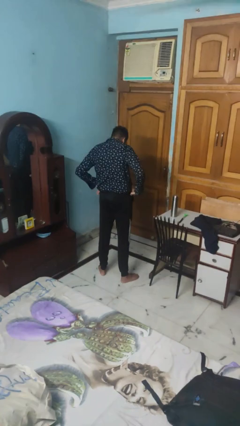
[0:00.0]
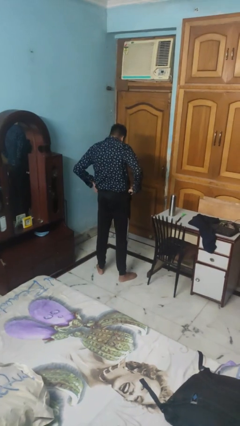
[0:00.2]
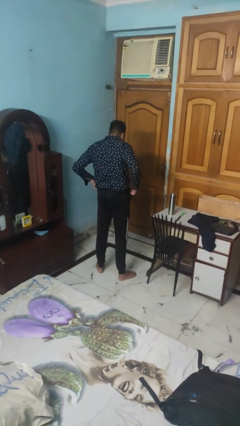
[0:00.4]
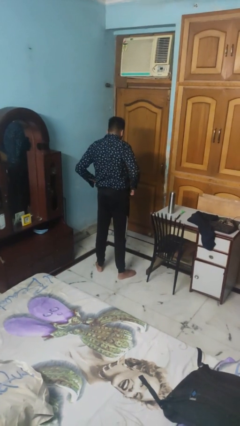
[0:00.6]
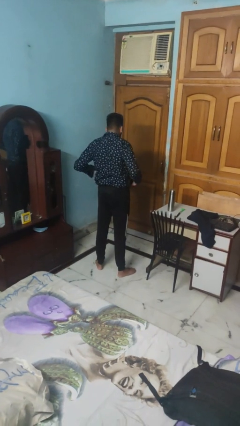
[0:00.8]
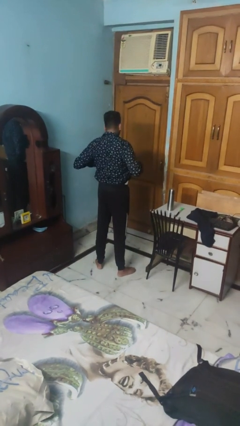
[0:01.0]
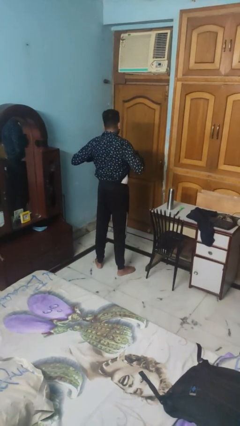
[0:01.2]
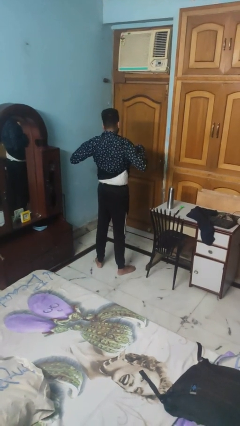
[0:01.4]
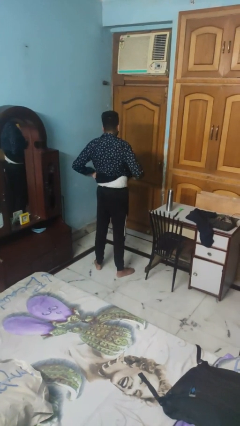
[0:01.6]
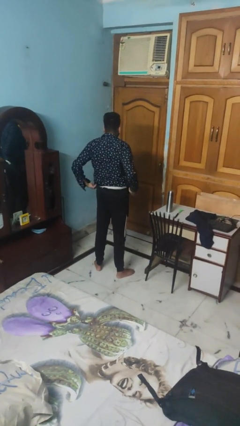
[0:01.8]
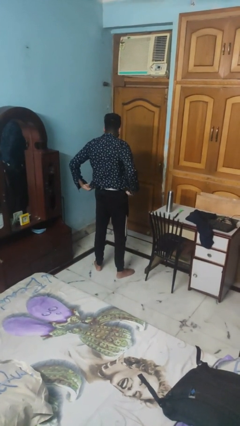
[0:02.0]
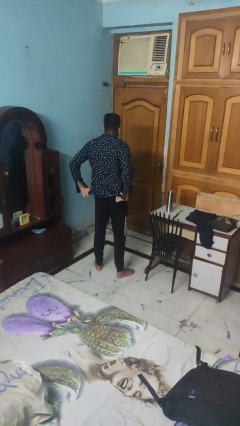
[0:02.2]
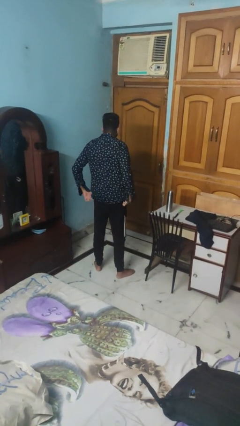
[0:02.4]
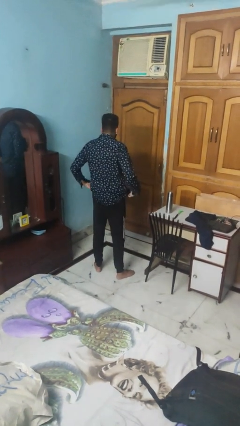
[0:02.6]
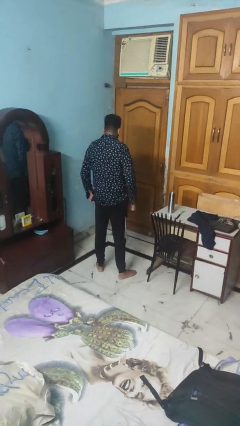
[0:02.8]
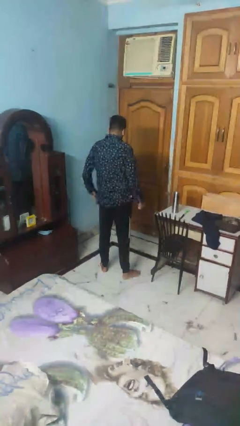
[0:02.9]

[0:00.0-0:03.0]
person untucks shirt

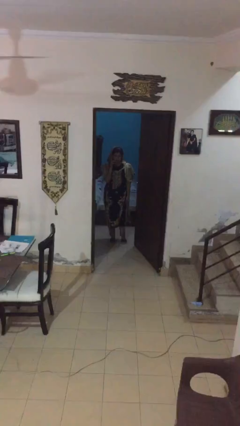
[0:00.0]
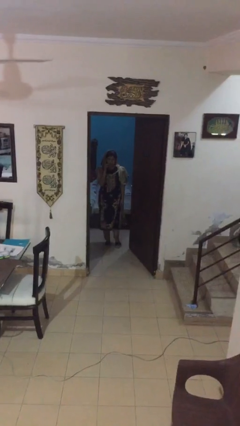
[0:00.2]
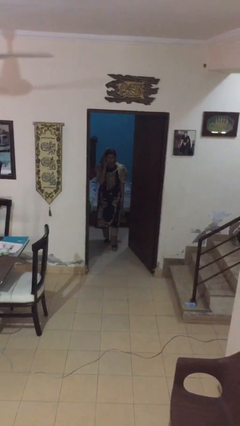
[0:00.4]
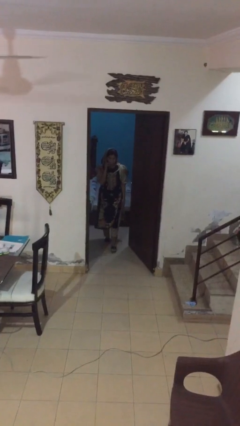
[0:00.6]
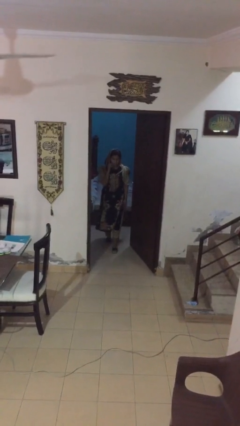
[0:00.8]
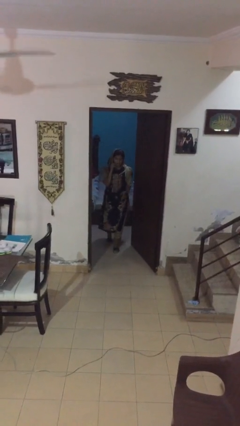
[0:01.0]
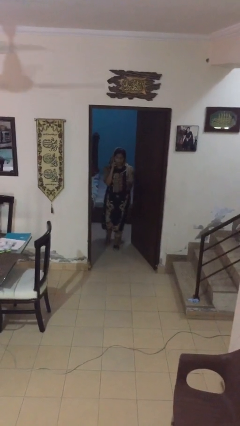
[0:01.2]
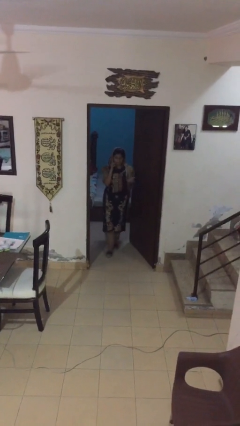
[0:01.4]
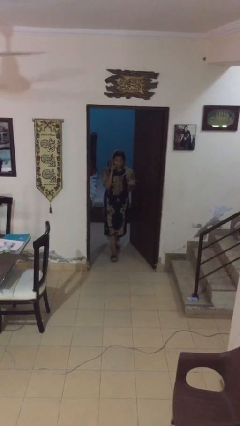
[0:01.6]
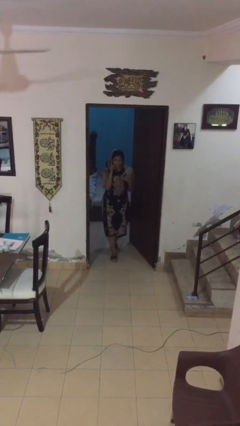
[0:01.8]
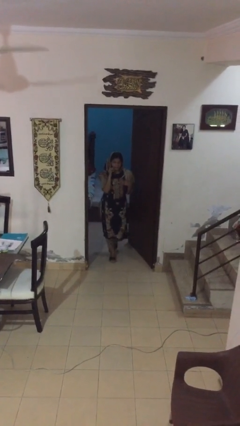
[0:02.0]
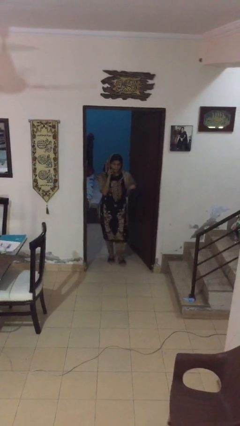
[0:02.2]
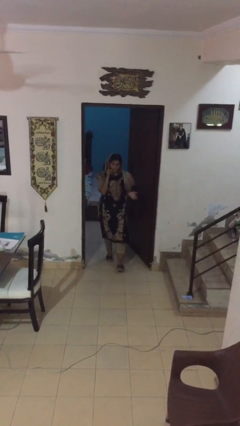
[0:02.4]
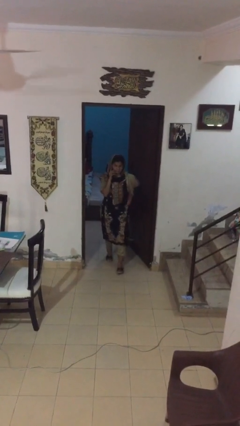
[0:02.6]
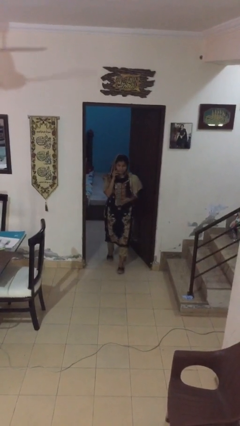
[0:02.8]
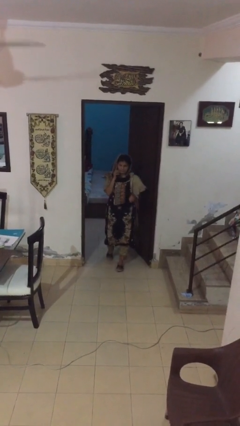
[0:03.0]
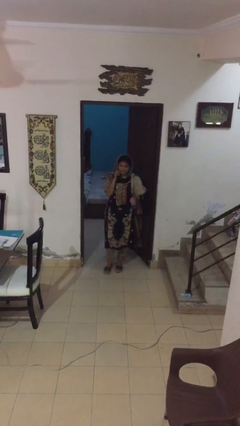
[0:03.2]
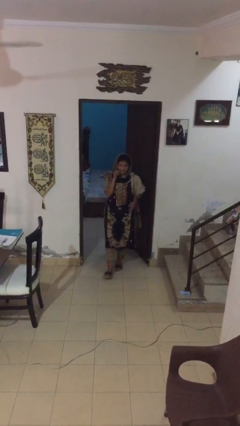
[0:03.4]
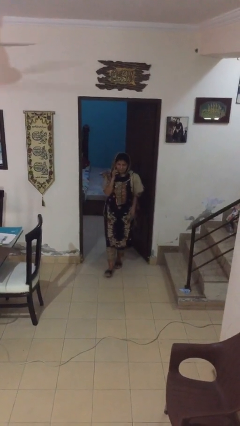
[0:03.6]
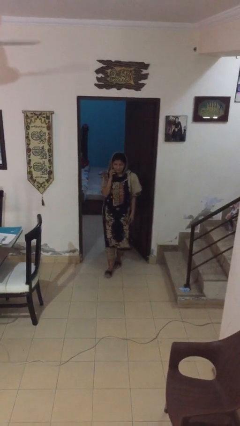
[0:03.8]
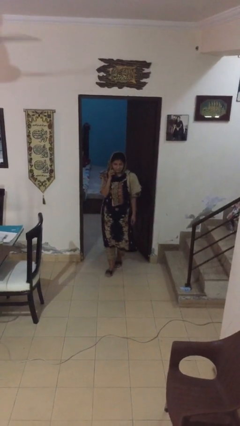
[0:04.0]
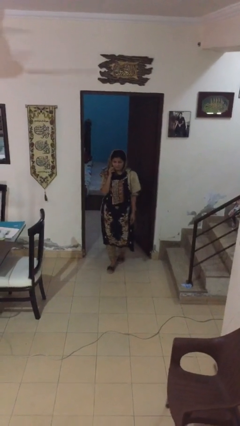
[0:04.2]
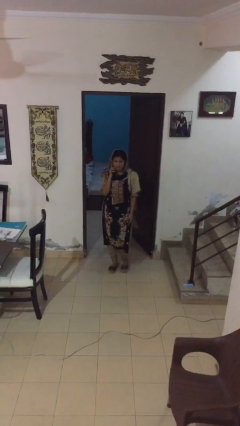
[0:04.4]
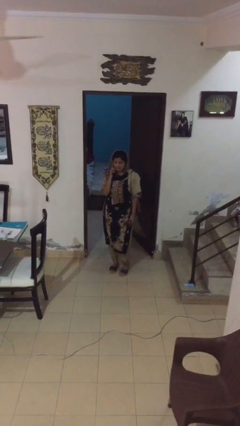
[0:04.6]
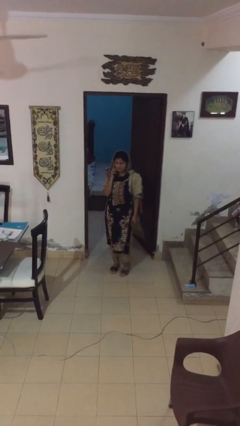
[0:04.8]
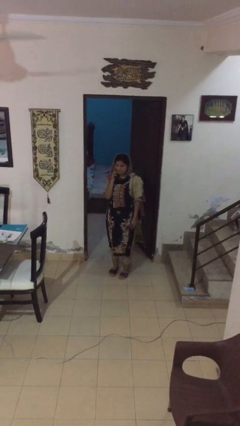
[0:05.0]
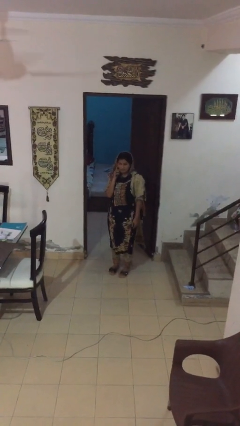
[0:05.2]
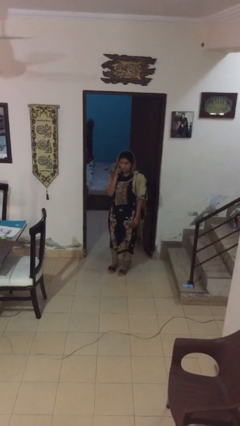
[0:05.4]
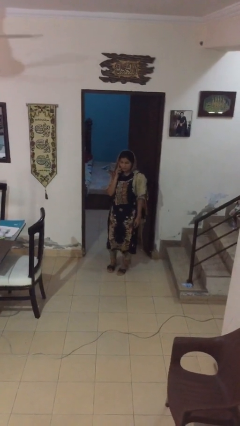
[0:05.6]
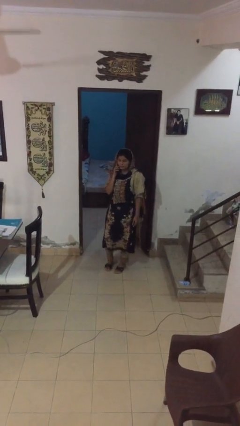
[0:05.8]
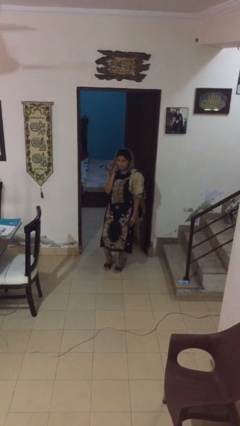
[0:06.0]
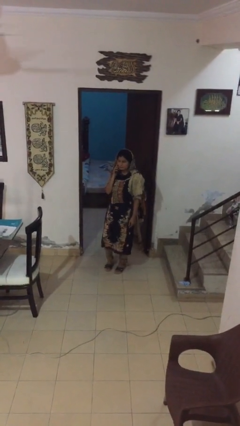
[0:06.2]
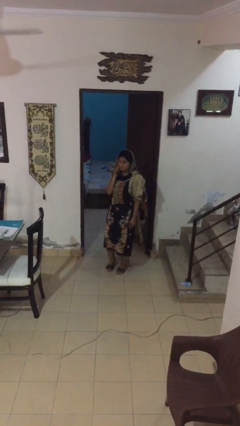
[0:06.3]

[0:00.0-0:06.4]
person enters scene through structure

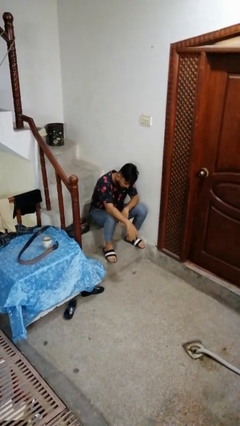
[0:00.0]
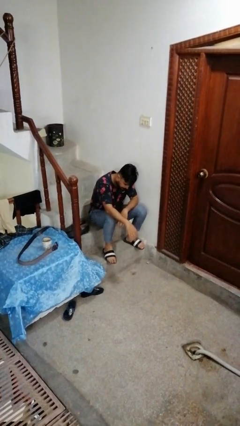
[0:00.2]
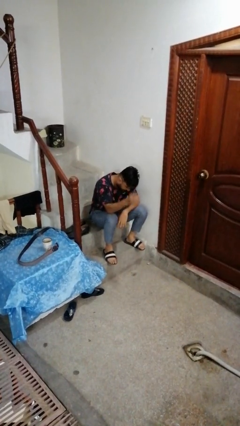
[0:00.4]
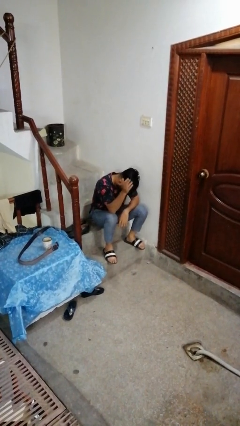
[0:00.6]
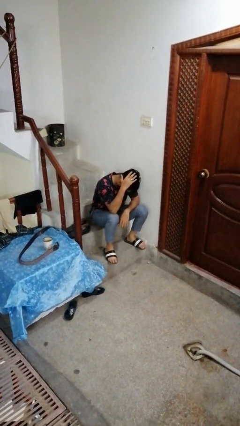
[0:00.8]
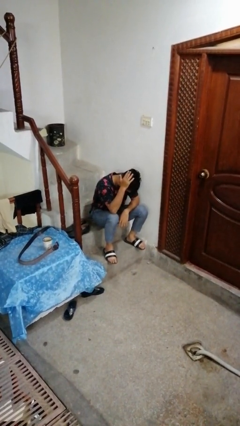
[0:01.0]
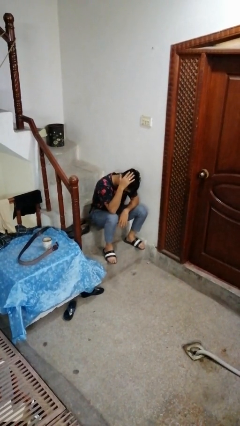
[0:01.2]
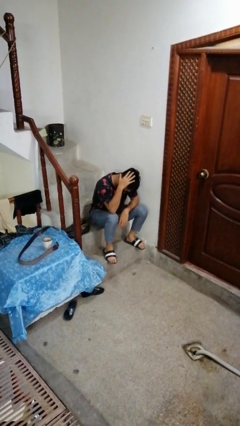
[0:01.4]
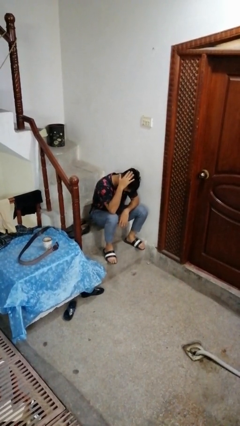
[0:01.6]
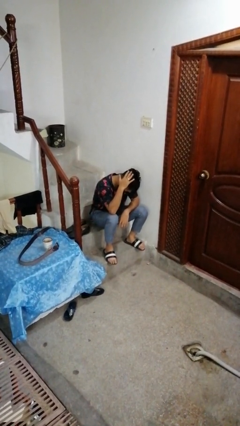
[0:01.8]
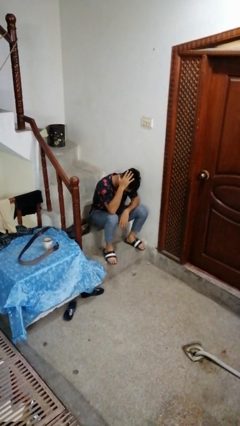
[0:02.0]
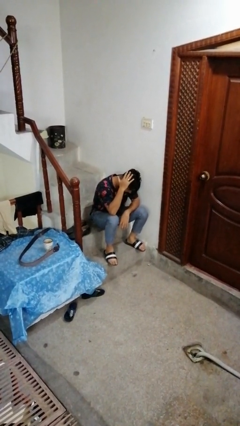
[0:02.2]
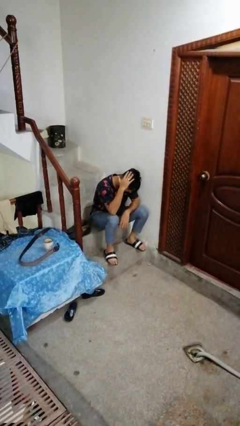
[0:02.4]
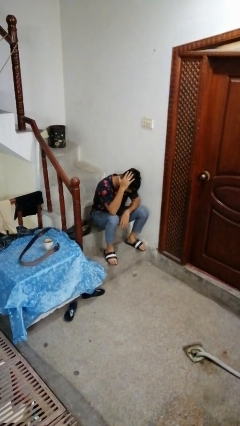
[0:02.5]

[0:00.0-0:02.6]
person strokes hair

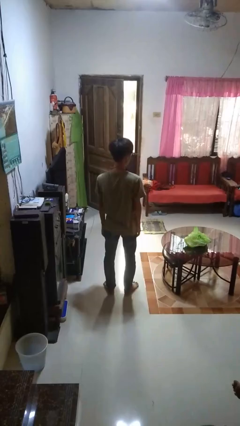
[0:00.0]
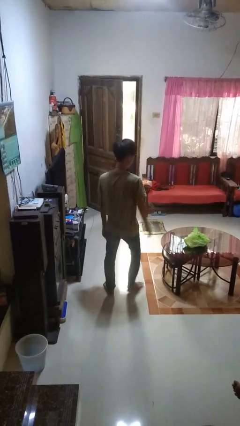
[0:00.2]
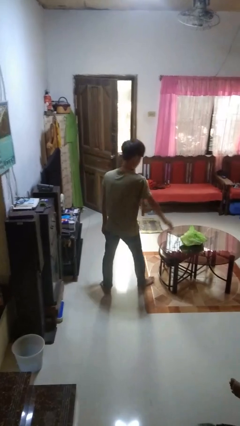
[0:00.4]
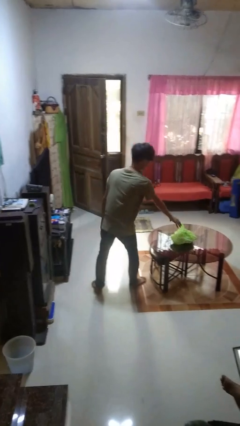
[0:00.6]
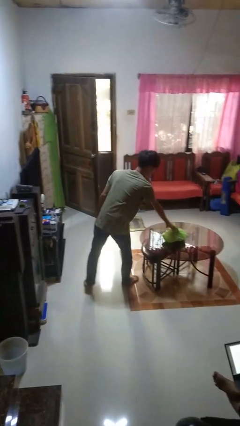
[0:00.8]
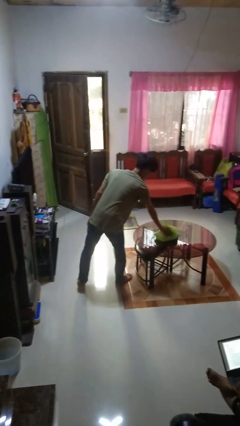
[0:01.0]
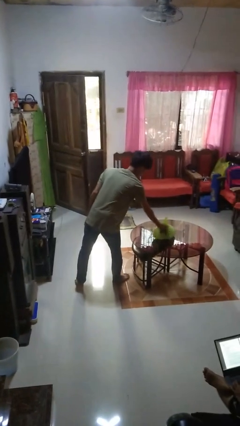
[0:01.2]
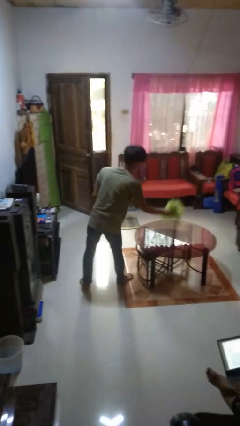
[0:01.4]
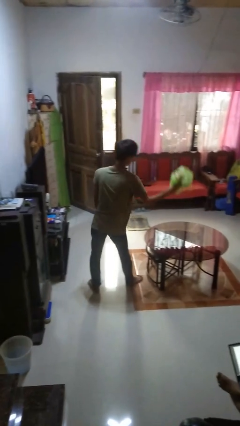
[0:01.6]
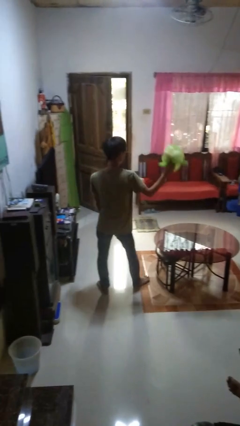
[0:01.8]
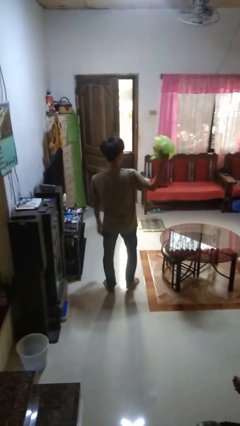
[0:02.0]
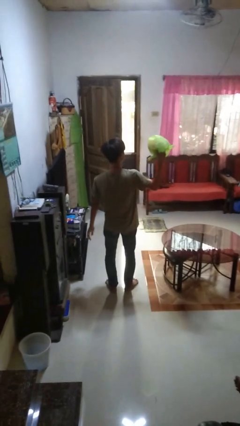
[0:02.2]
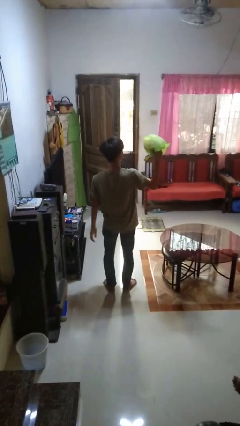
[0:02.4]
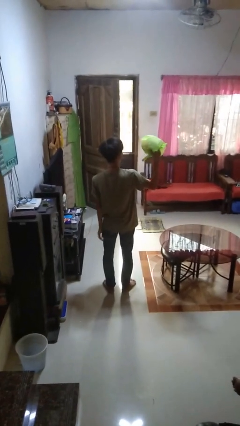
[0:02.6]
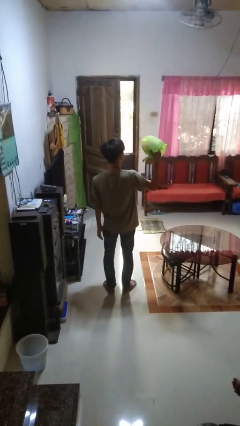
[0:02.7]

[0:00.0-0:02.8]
person picks up object from table

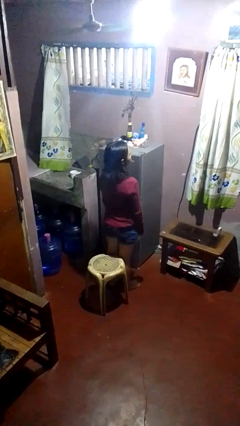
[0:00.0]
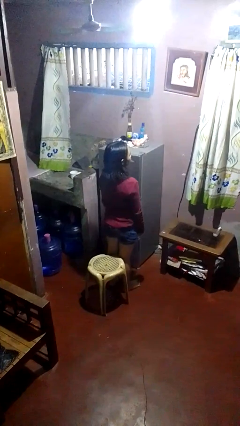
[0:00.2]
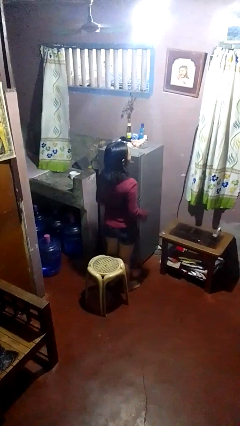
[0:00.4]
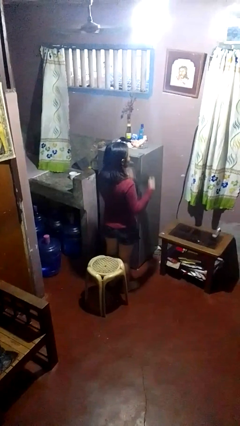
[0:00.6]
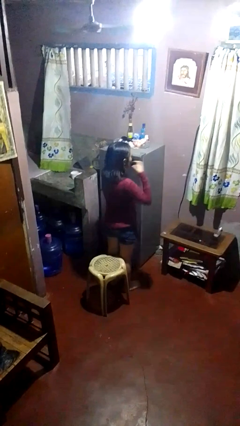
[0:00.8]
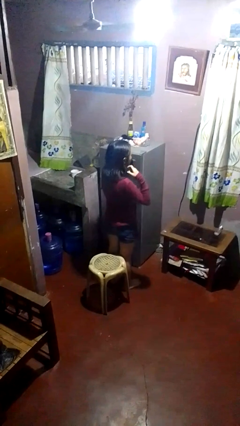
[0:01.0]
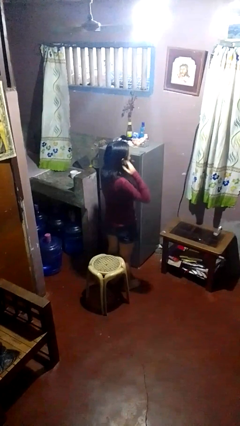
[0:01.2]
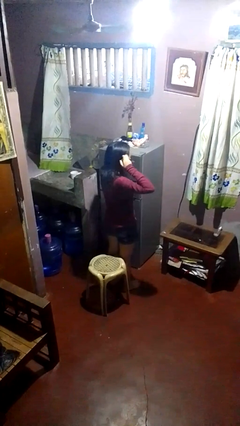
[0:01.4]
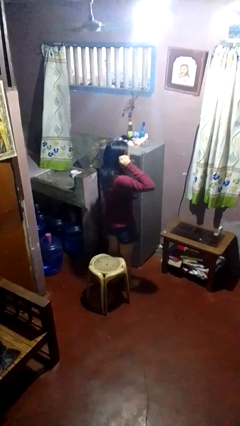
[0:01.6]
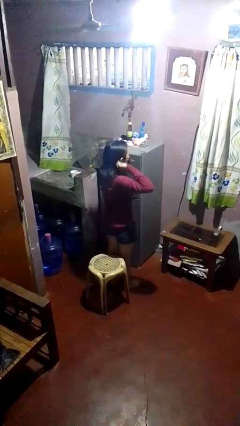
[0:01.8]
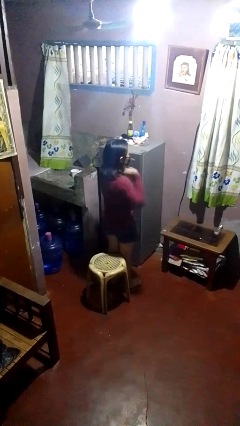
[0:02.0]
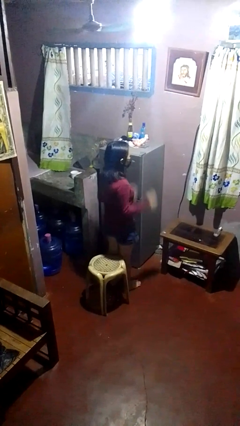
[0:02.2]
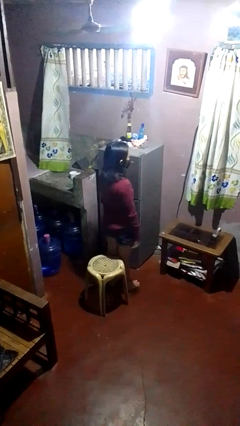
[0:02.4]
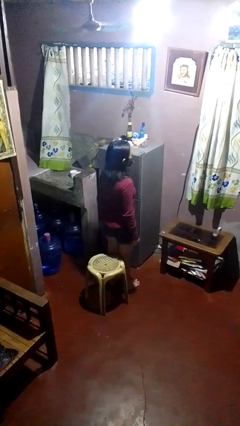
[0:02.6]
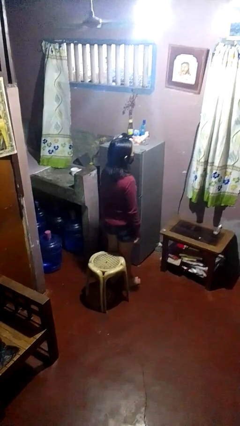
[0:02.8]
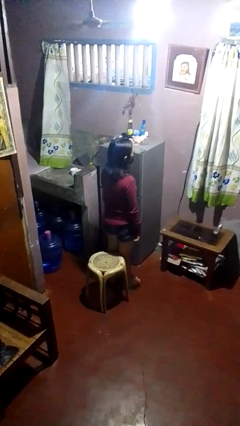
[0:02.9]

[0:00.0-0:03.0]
person puts on facemask
